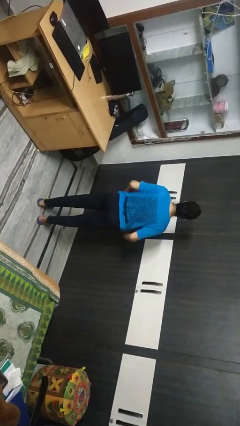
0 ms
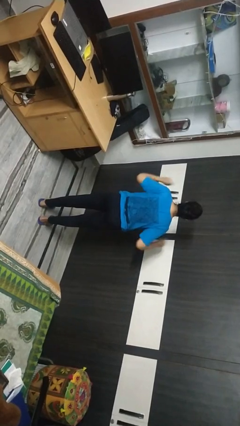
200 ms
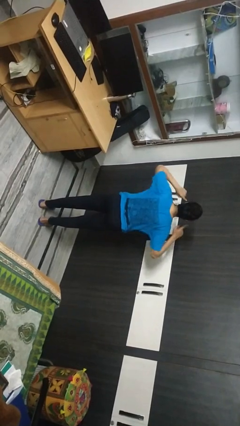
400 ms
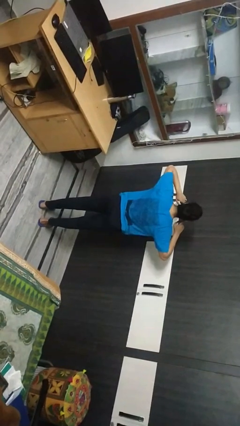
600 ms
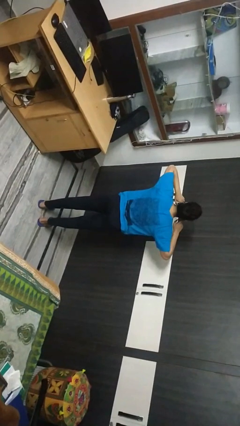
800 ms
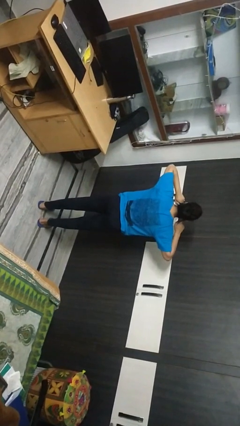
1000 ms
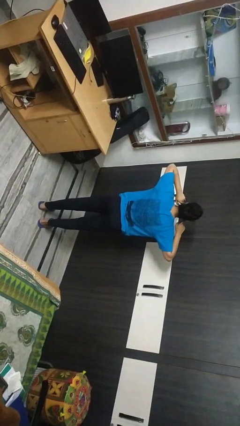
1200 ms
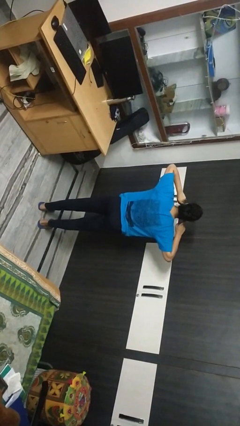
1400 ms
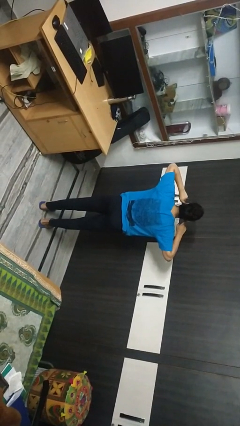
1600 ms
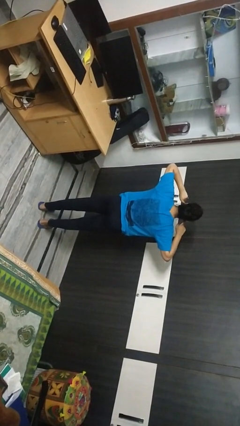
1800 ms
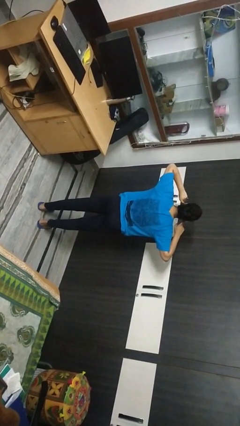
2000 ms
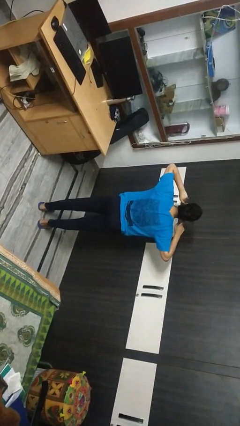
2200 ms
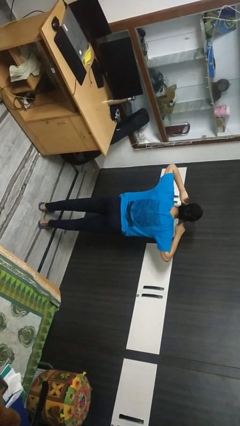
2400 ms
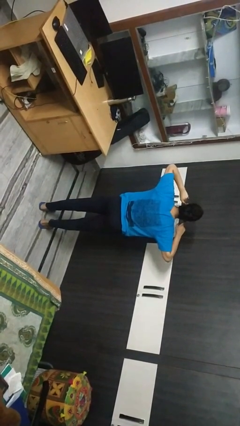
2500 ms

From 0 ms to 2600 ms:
person puts fingers in ear

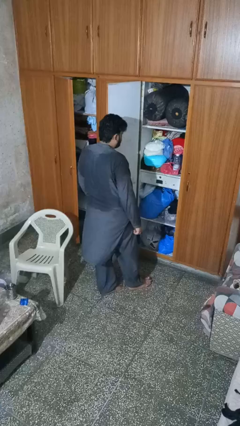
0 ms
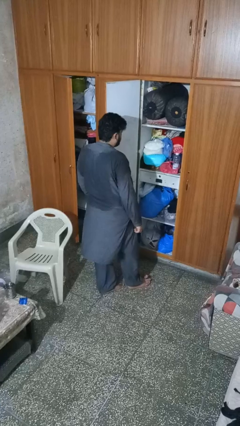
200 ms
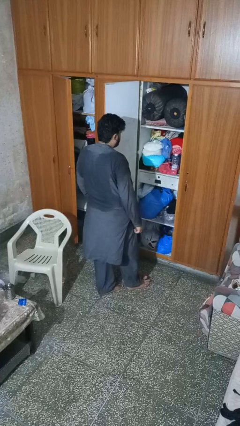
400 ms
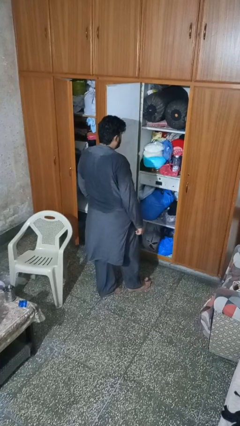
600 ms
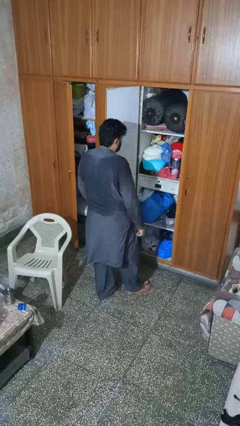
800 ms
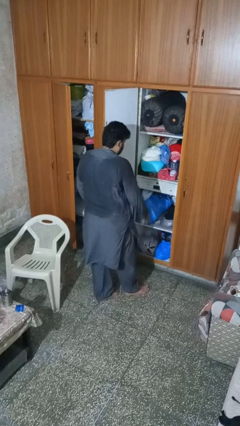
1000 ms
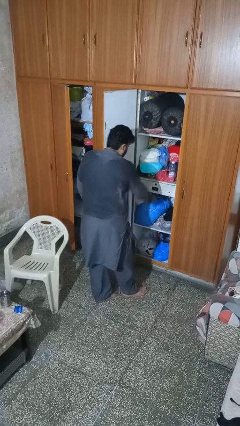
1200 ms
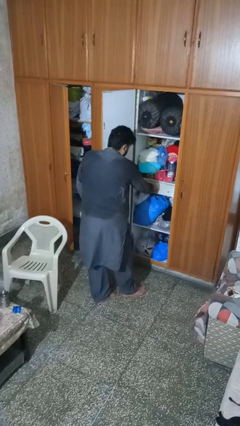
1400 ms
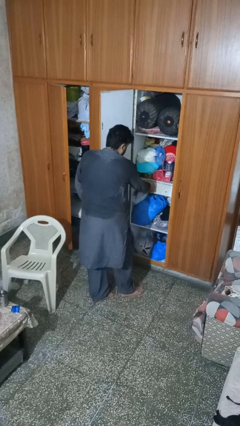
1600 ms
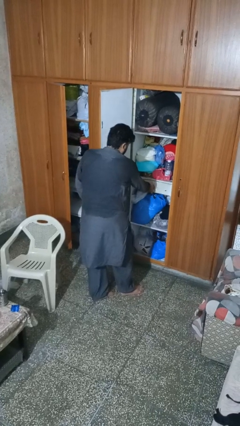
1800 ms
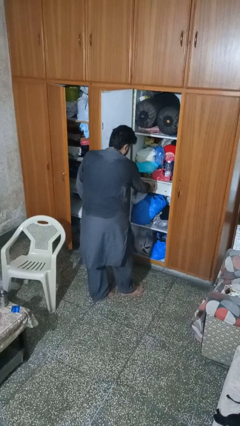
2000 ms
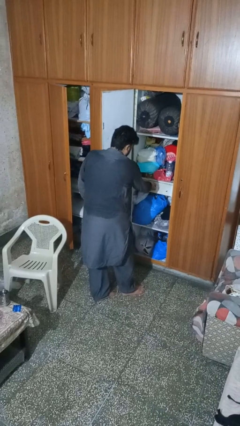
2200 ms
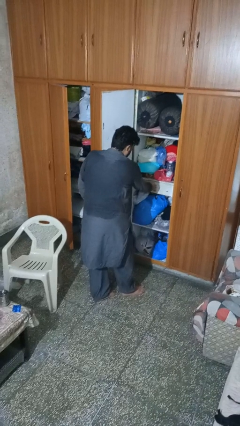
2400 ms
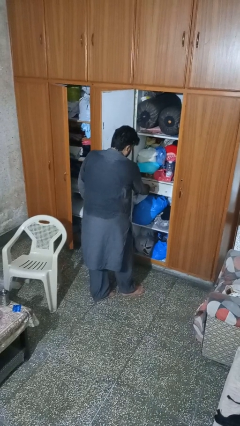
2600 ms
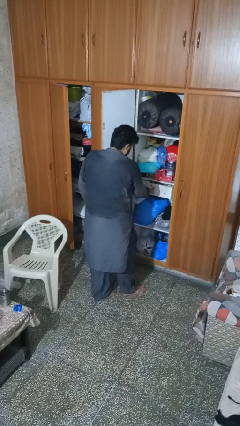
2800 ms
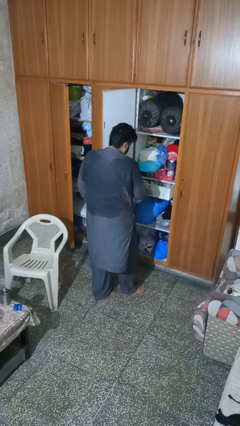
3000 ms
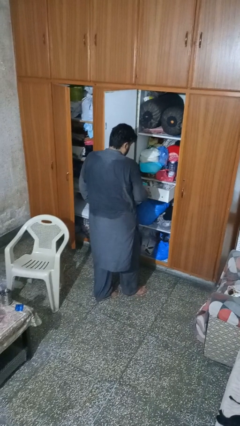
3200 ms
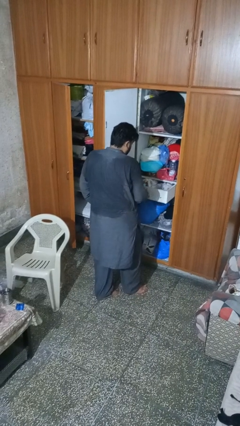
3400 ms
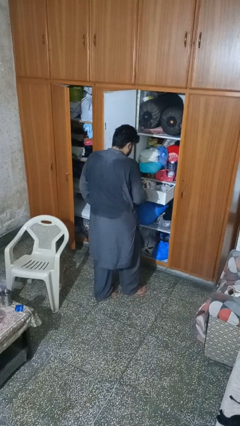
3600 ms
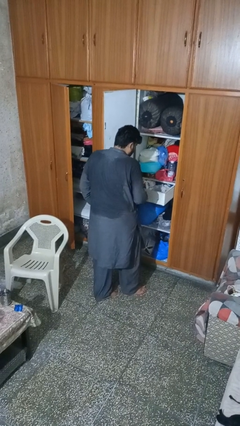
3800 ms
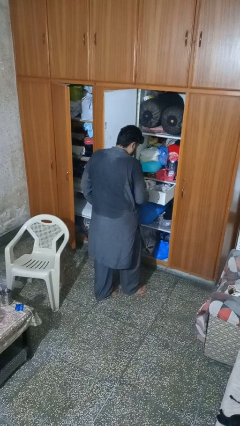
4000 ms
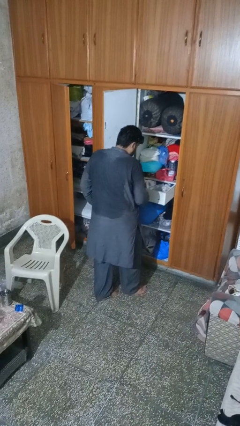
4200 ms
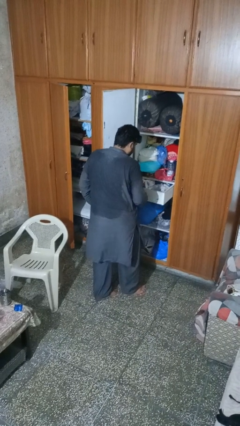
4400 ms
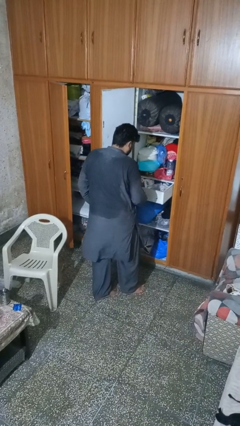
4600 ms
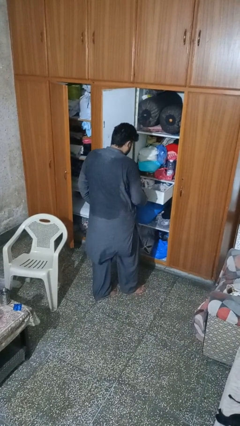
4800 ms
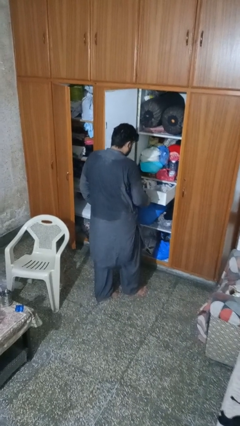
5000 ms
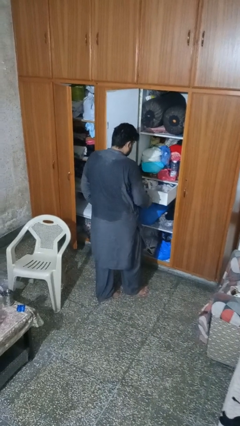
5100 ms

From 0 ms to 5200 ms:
person opens dresser drawer

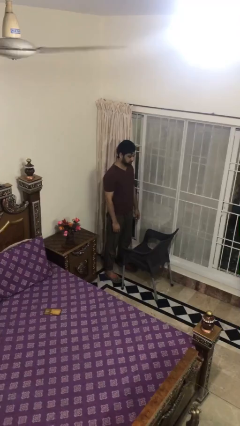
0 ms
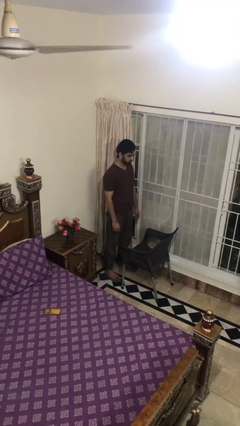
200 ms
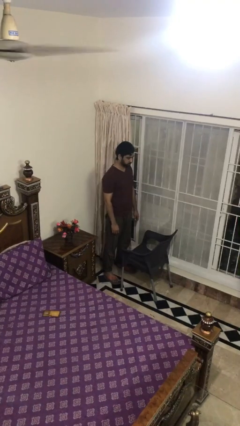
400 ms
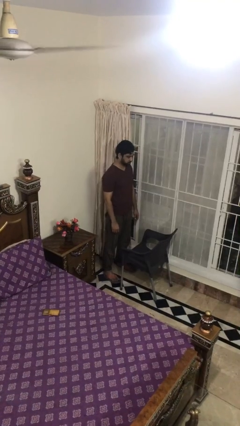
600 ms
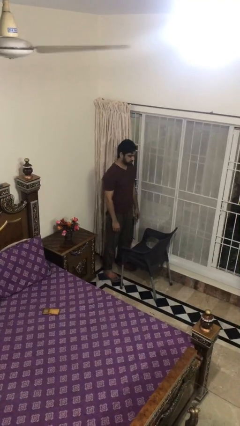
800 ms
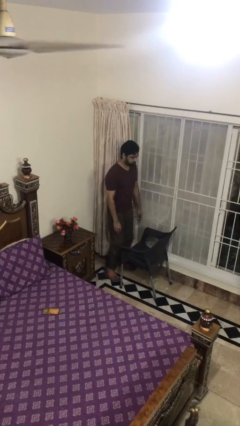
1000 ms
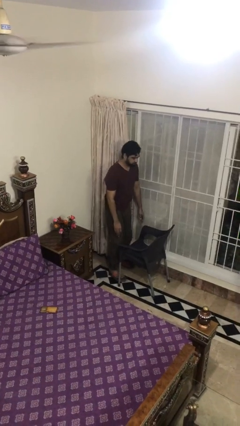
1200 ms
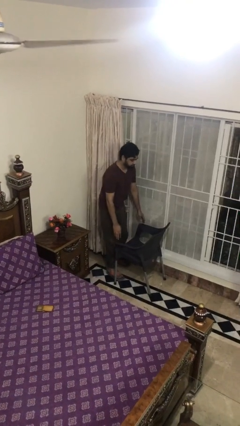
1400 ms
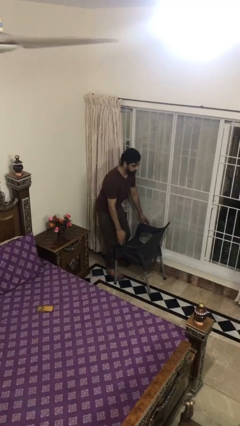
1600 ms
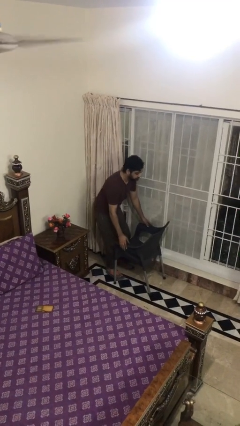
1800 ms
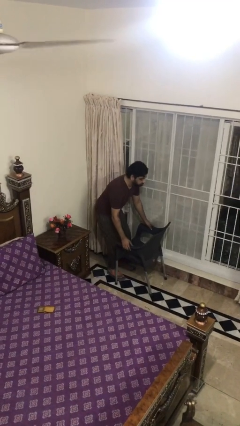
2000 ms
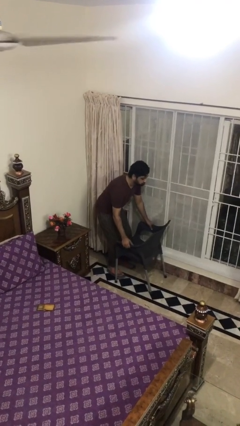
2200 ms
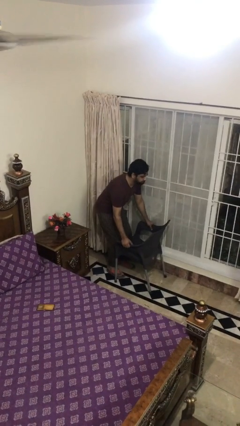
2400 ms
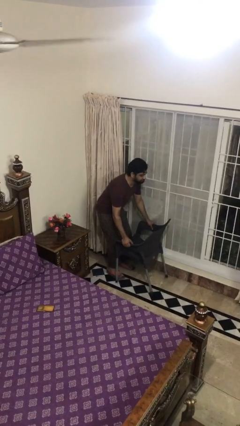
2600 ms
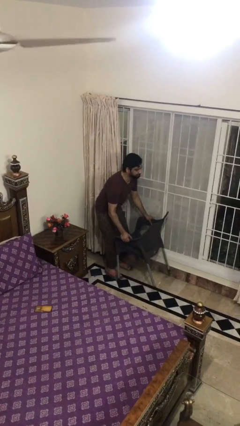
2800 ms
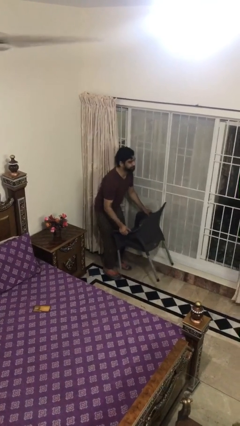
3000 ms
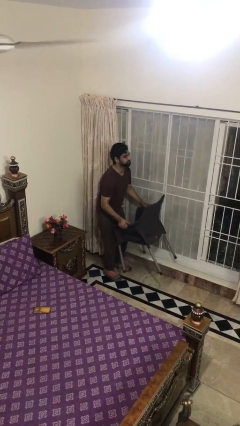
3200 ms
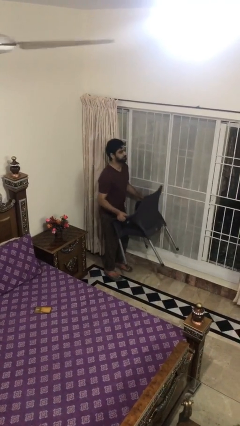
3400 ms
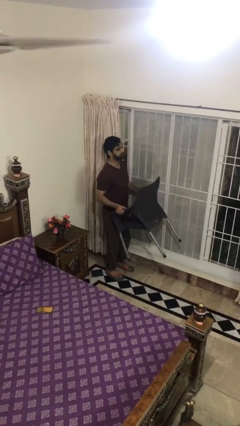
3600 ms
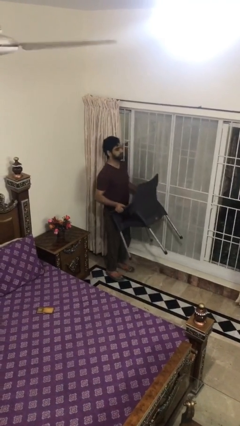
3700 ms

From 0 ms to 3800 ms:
person picks up object from floor

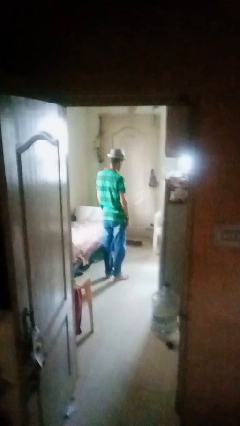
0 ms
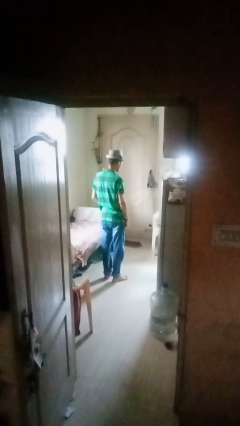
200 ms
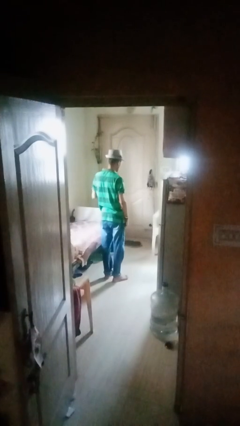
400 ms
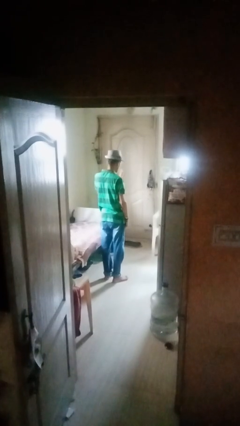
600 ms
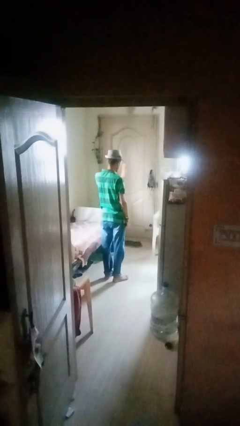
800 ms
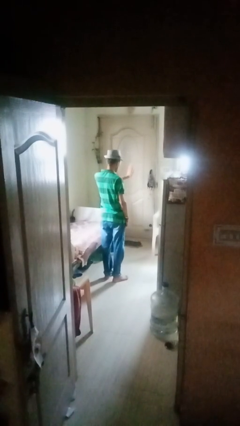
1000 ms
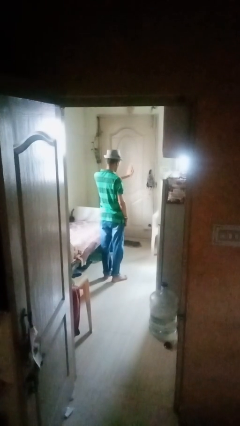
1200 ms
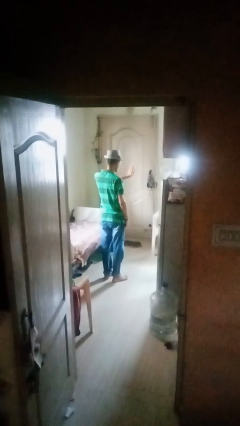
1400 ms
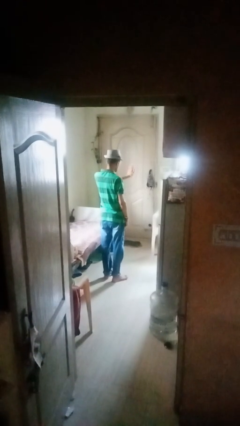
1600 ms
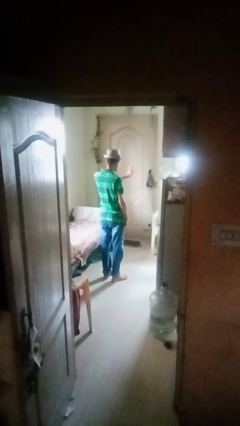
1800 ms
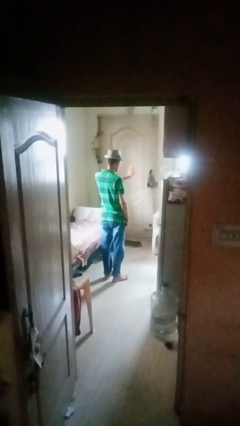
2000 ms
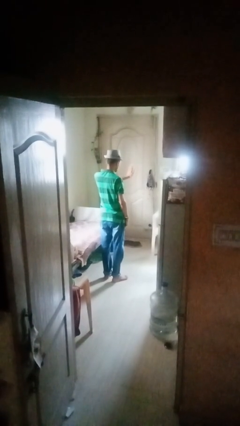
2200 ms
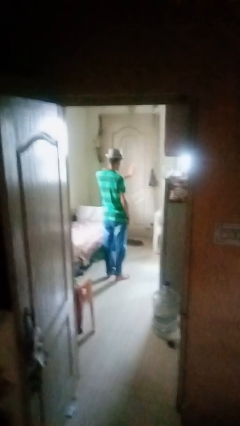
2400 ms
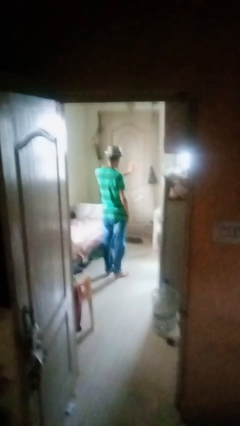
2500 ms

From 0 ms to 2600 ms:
person gestures stop

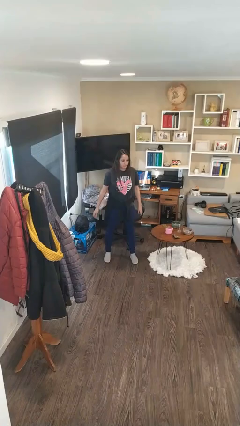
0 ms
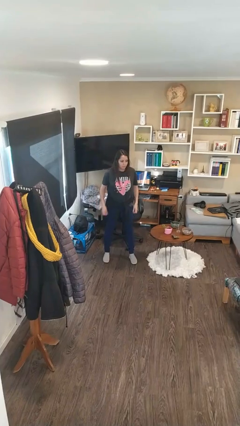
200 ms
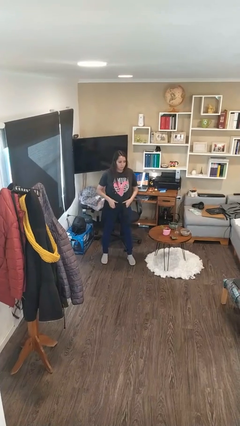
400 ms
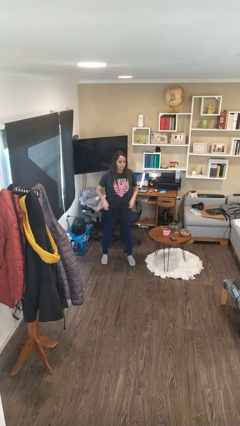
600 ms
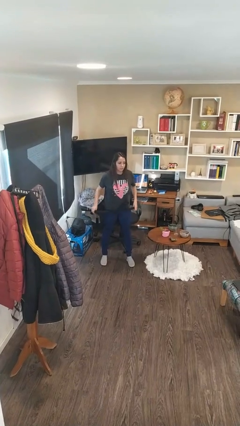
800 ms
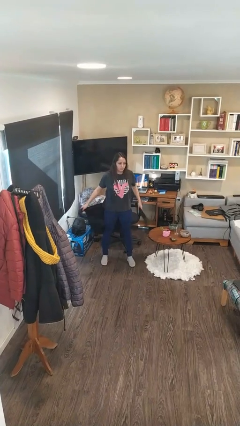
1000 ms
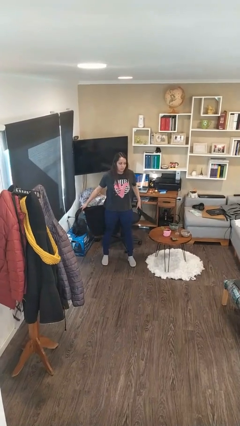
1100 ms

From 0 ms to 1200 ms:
person unties jacket around waist

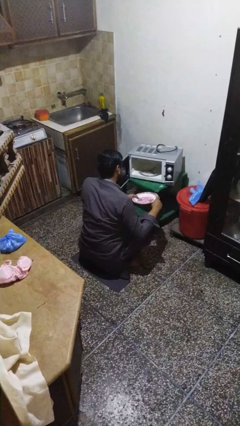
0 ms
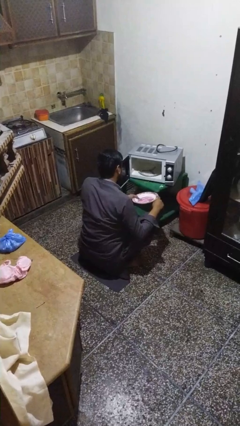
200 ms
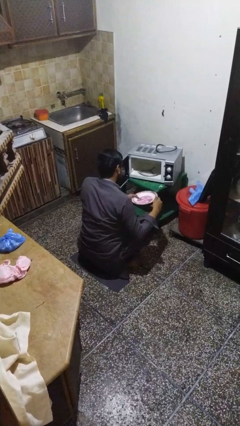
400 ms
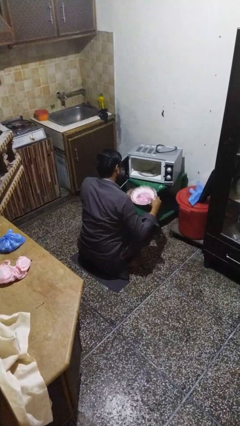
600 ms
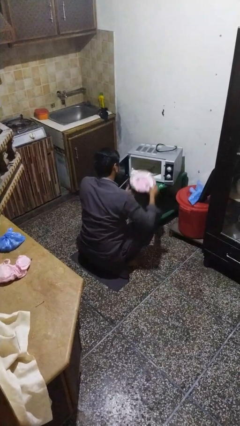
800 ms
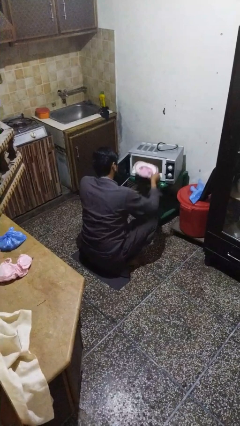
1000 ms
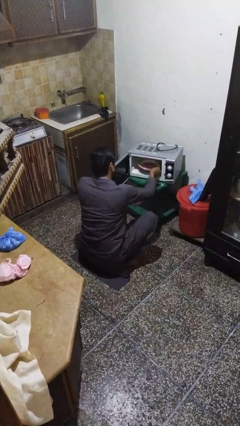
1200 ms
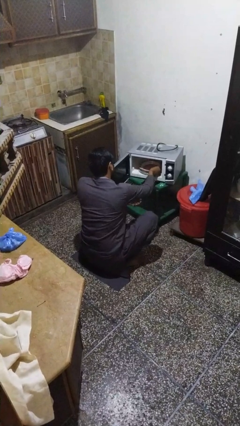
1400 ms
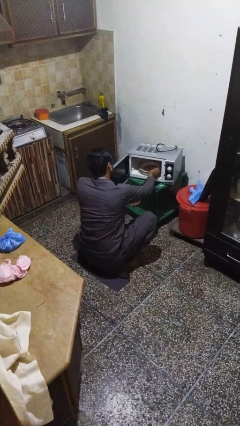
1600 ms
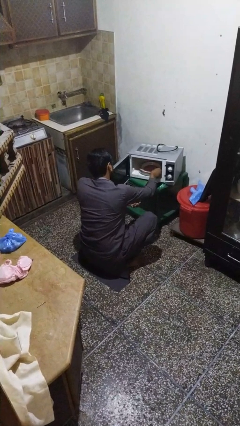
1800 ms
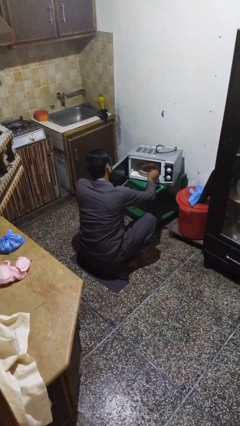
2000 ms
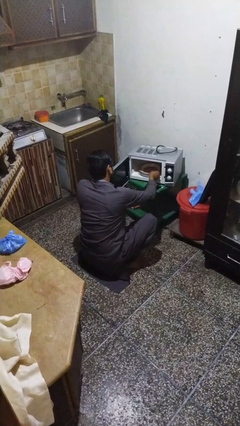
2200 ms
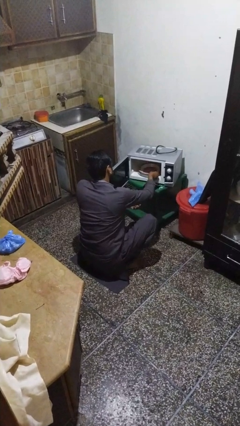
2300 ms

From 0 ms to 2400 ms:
person puts object into microwave

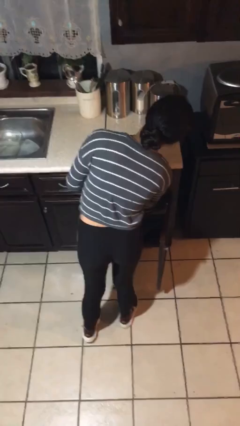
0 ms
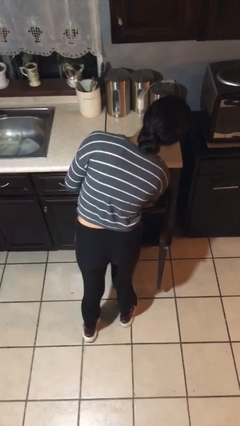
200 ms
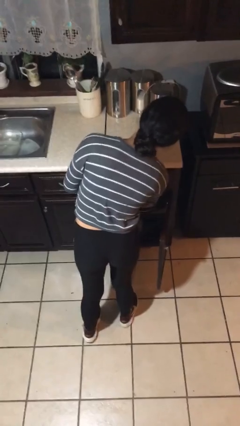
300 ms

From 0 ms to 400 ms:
person takes object from cabinet
